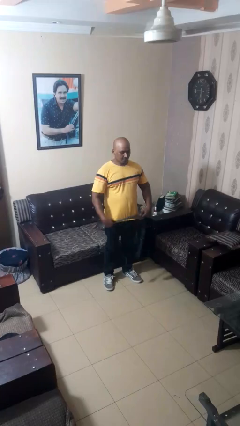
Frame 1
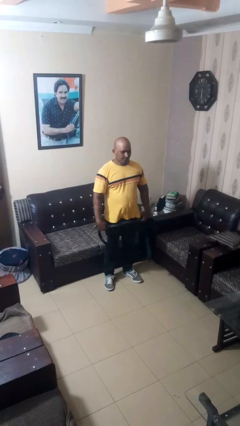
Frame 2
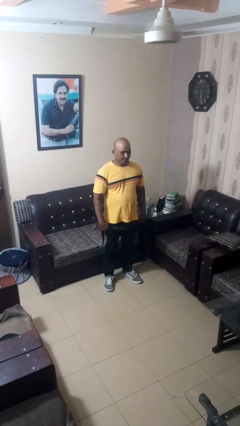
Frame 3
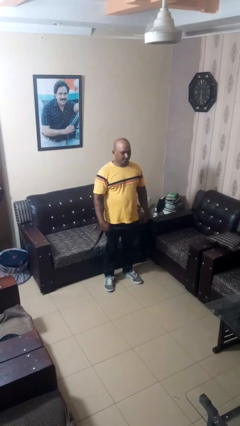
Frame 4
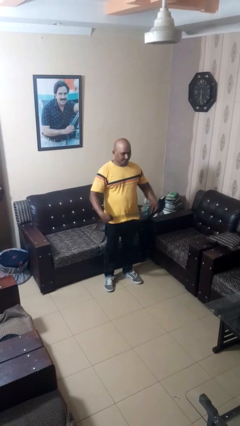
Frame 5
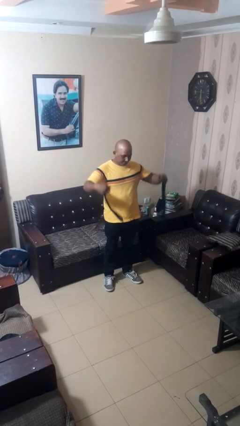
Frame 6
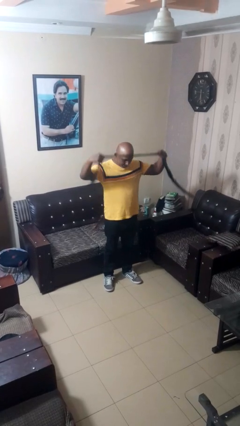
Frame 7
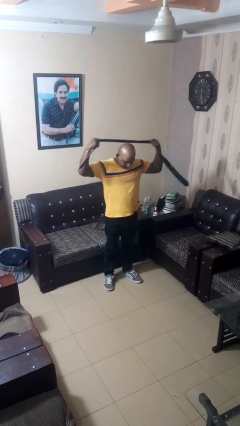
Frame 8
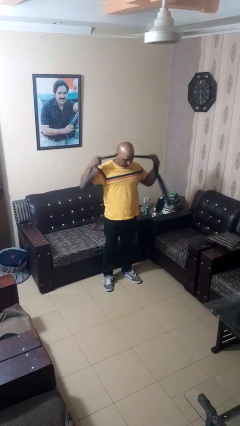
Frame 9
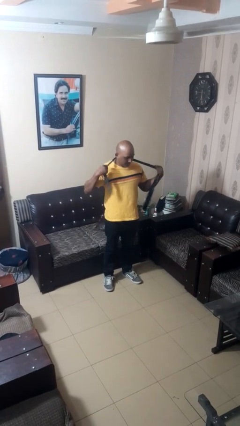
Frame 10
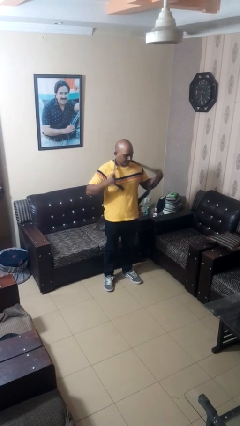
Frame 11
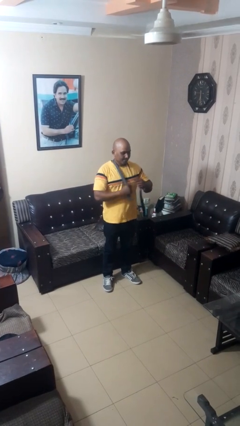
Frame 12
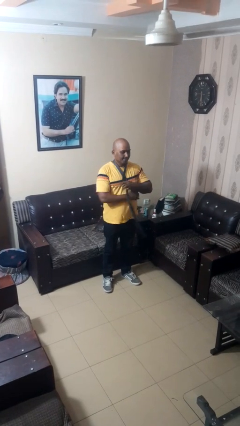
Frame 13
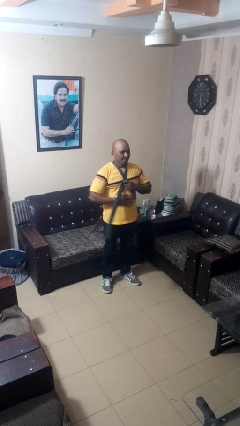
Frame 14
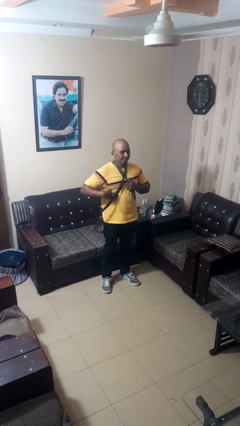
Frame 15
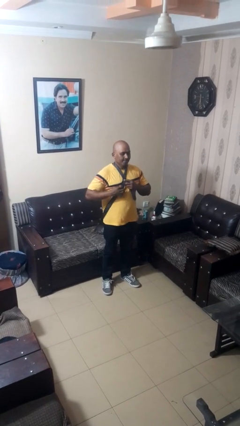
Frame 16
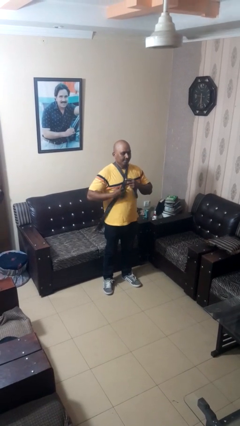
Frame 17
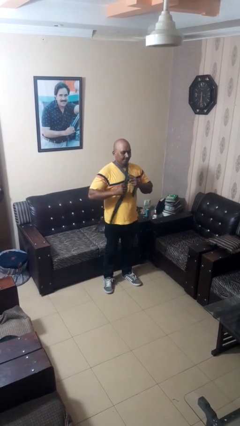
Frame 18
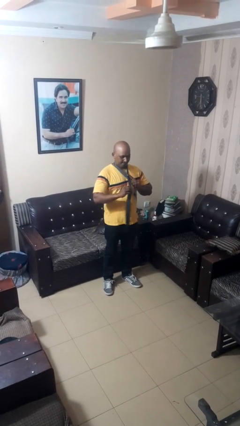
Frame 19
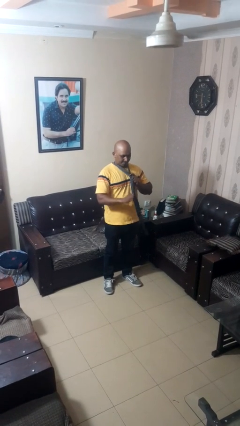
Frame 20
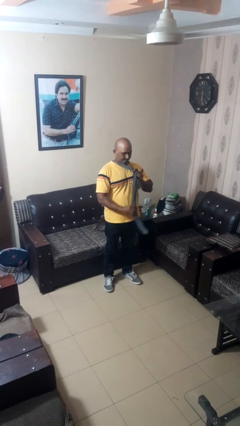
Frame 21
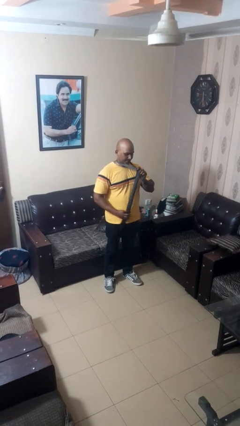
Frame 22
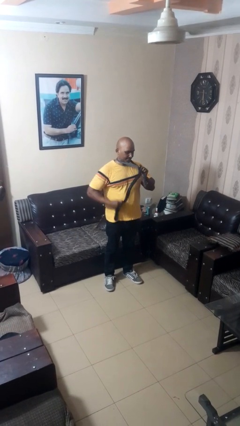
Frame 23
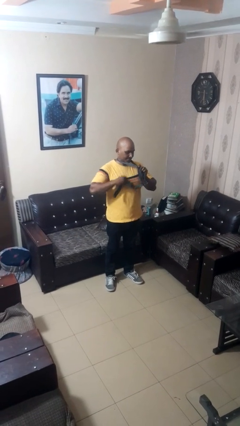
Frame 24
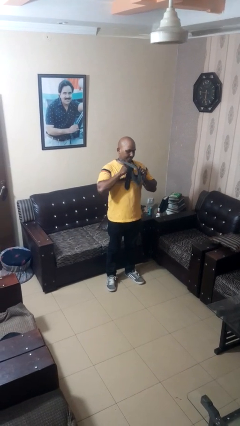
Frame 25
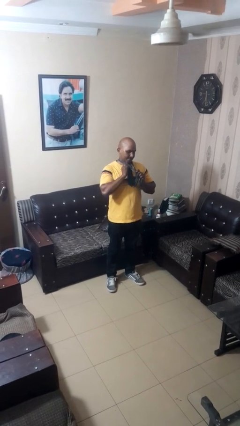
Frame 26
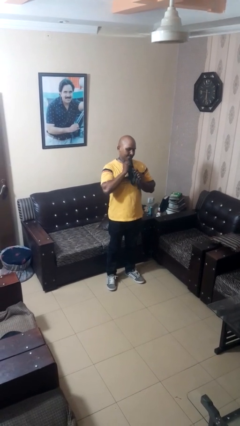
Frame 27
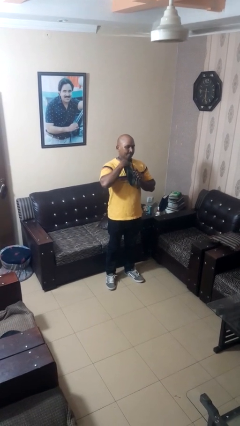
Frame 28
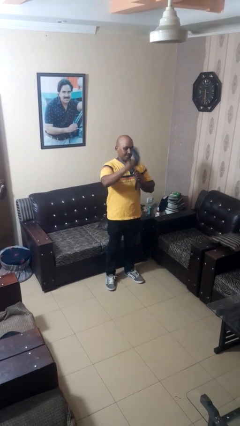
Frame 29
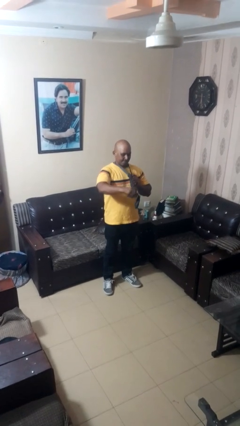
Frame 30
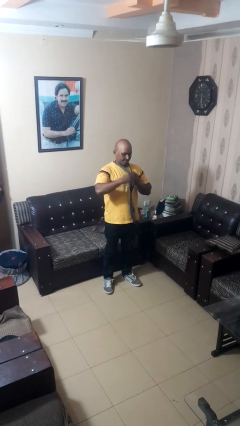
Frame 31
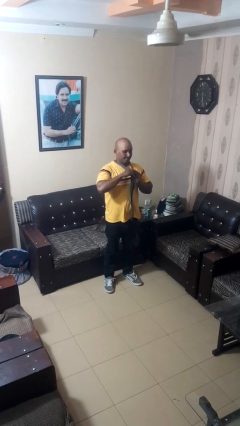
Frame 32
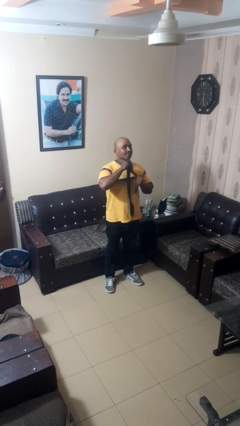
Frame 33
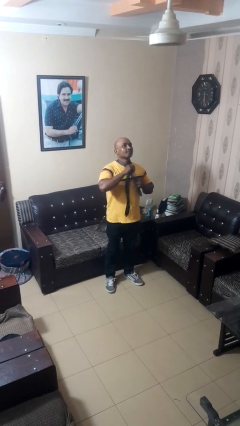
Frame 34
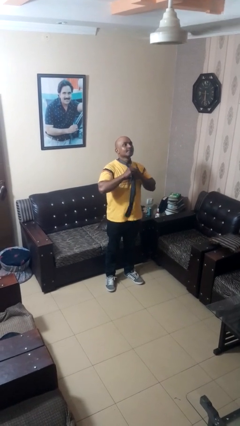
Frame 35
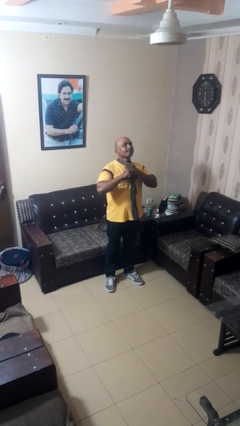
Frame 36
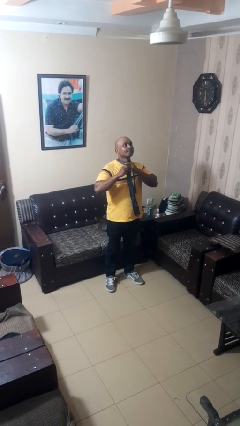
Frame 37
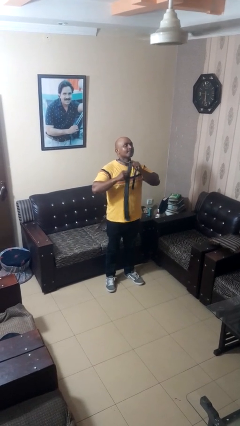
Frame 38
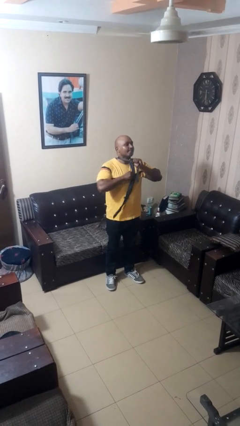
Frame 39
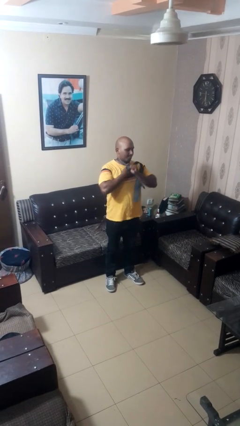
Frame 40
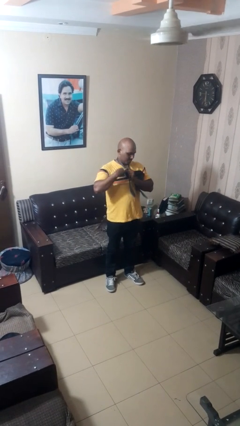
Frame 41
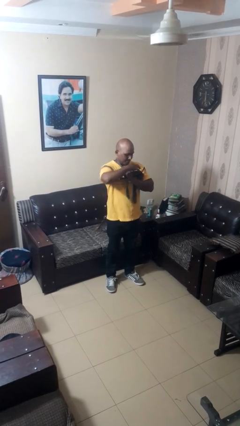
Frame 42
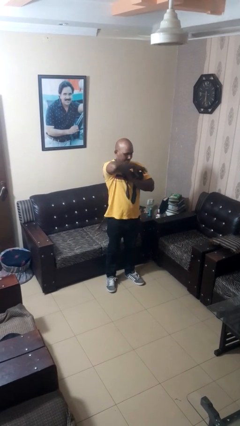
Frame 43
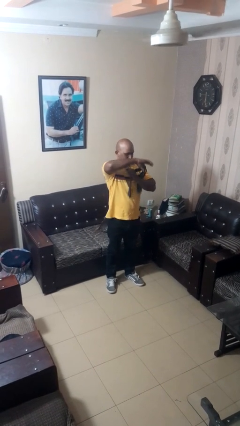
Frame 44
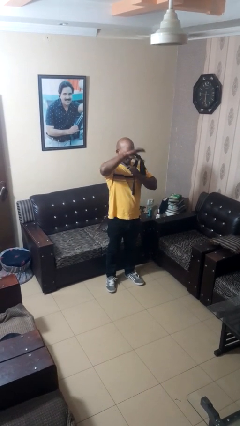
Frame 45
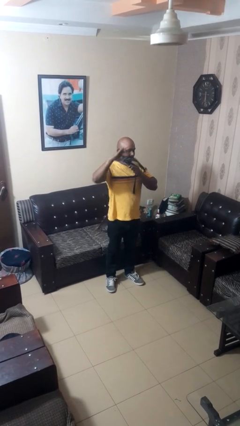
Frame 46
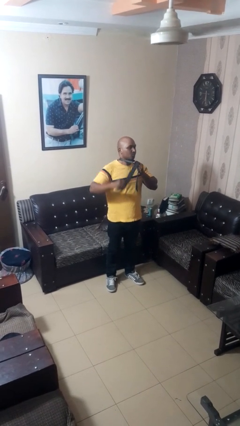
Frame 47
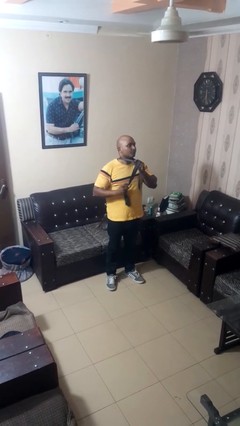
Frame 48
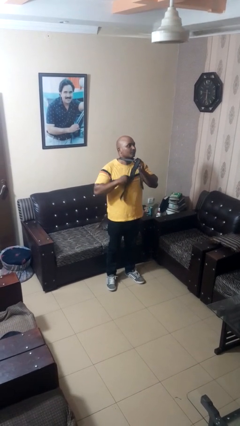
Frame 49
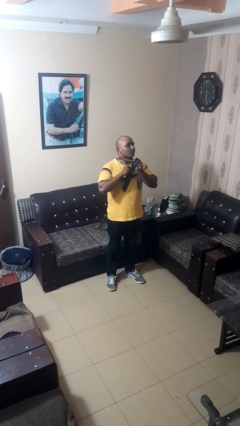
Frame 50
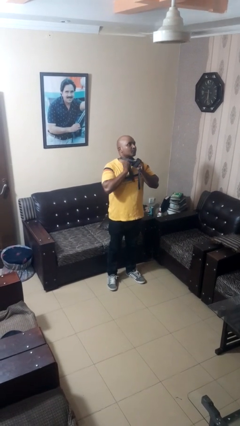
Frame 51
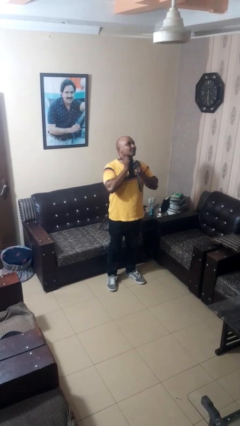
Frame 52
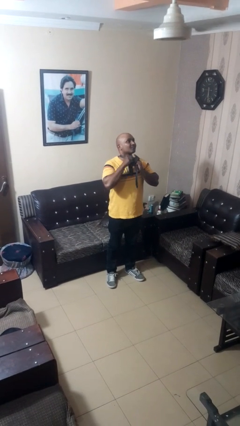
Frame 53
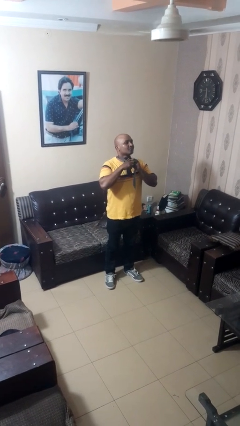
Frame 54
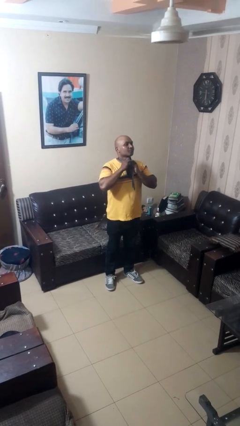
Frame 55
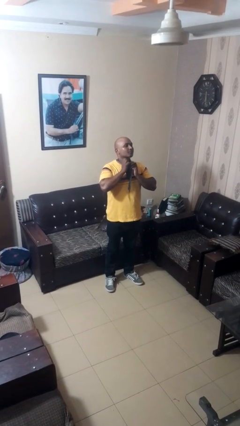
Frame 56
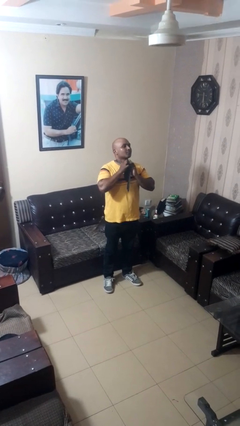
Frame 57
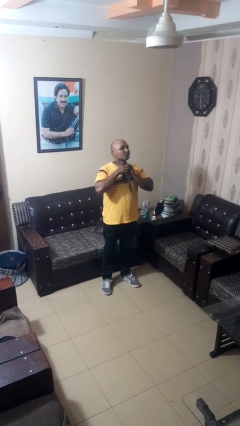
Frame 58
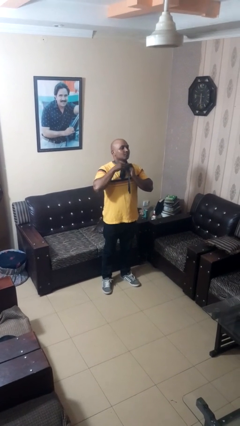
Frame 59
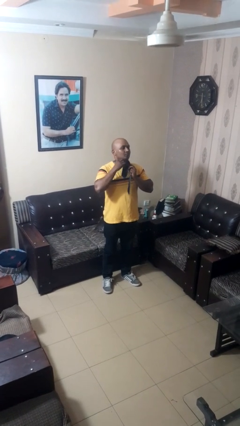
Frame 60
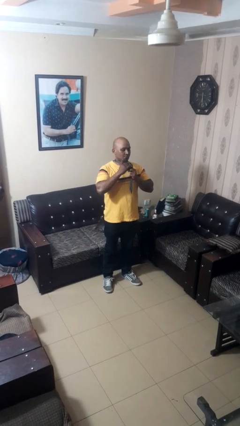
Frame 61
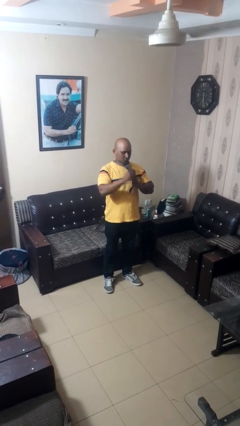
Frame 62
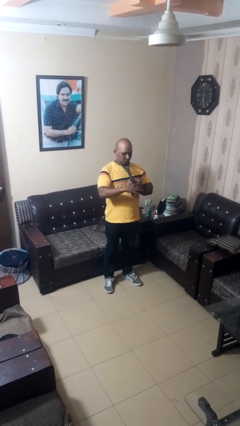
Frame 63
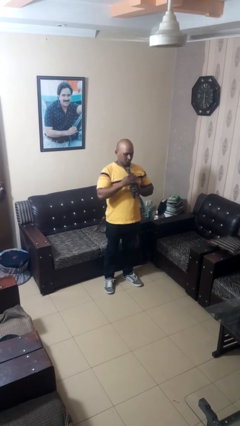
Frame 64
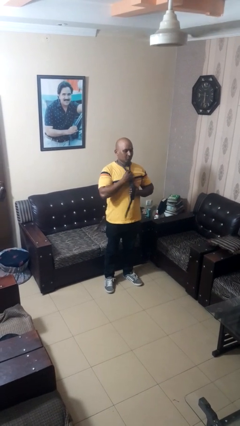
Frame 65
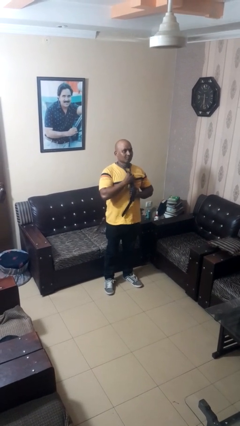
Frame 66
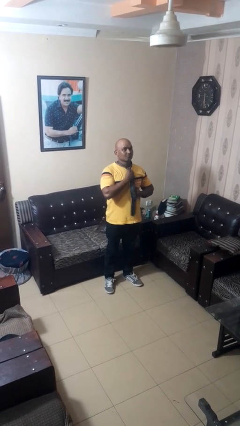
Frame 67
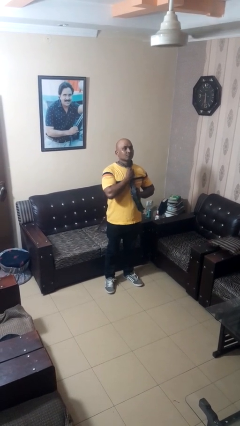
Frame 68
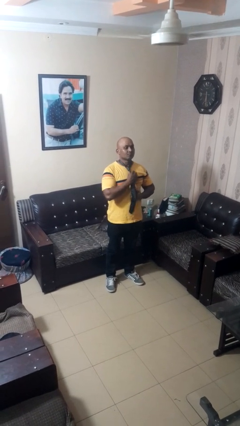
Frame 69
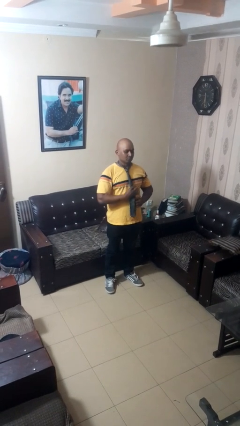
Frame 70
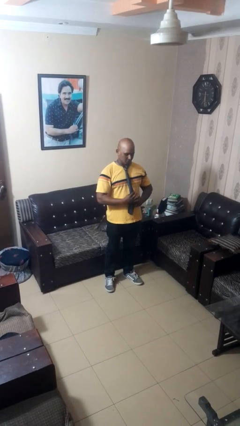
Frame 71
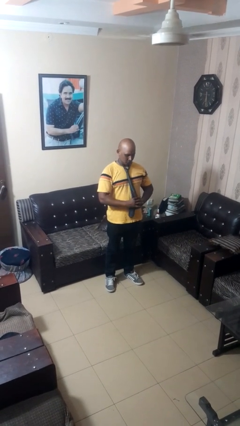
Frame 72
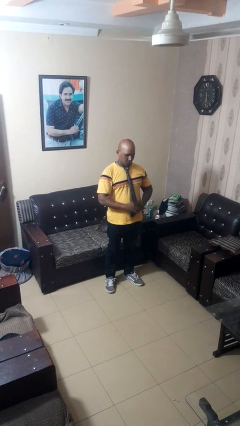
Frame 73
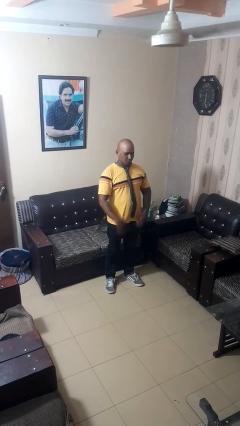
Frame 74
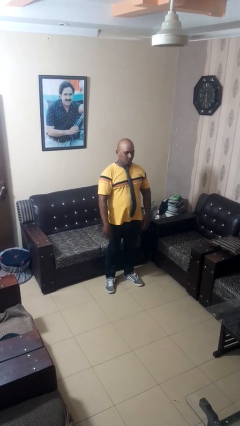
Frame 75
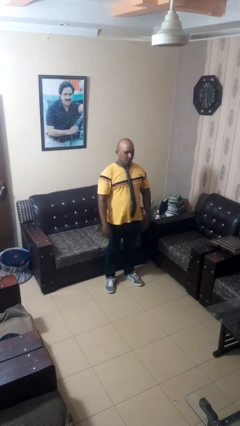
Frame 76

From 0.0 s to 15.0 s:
person puts on necktie

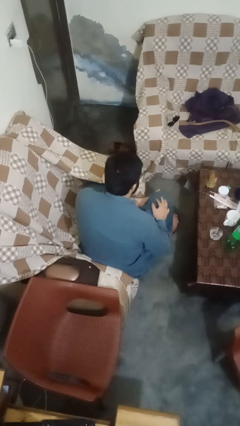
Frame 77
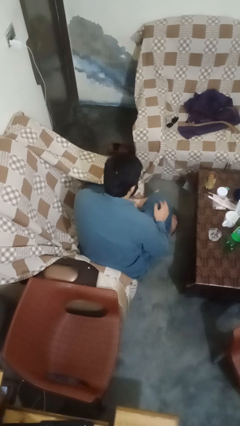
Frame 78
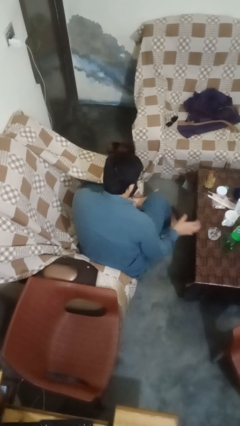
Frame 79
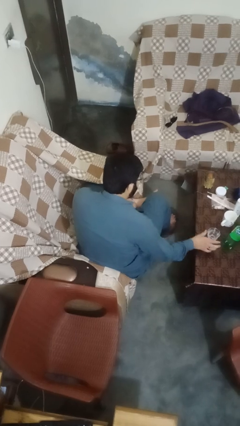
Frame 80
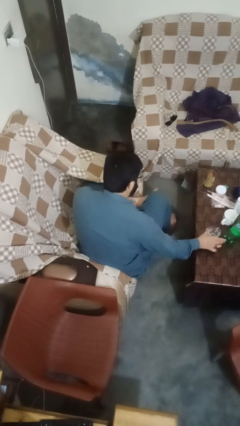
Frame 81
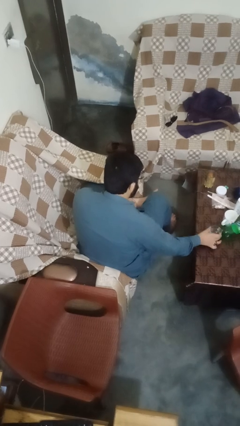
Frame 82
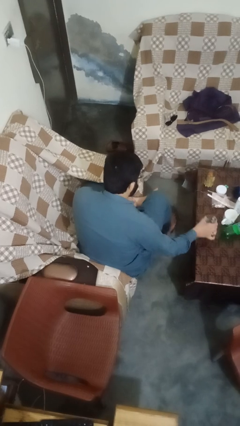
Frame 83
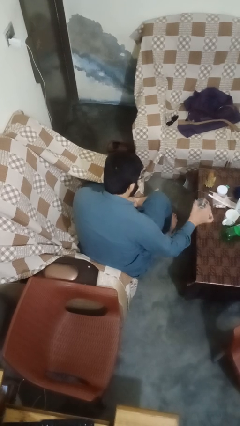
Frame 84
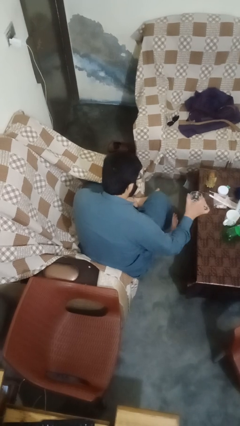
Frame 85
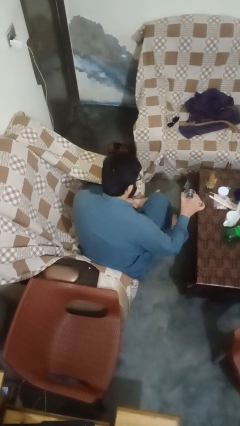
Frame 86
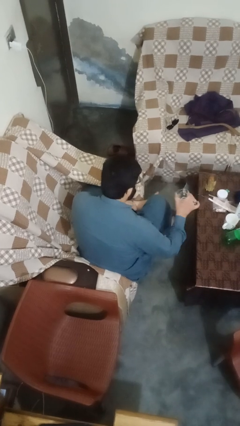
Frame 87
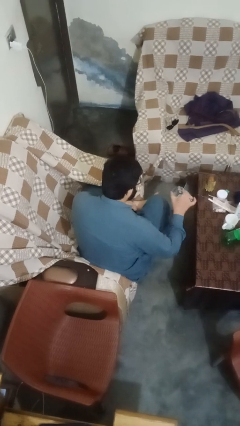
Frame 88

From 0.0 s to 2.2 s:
person picks up object from table

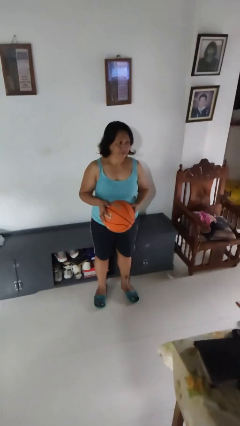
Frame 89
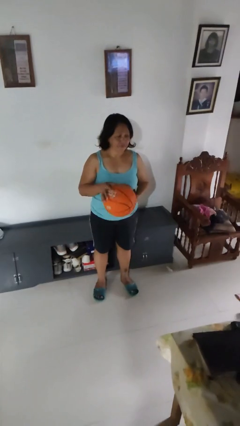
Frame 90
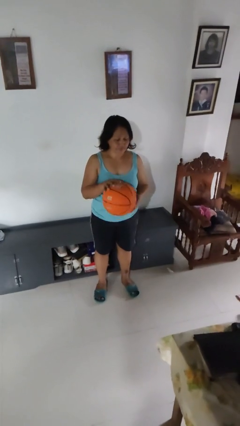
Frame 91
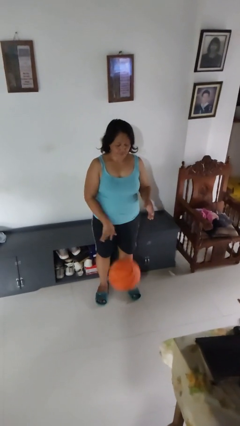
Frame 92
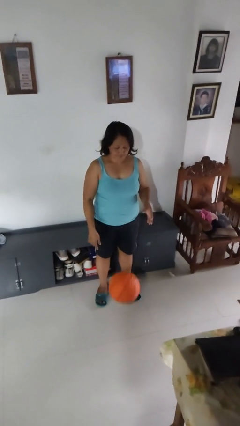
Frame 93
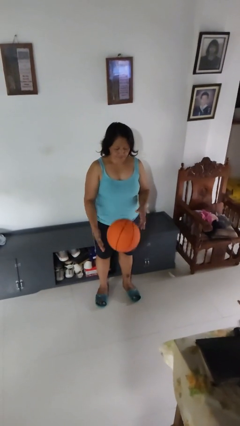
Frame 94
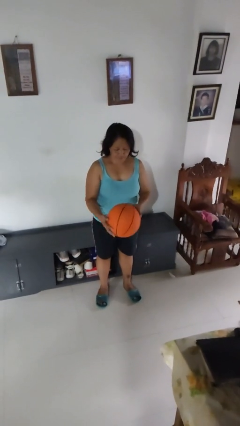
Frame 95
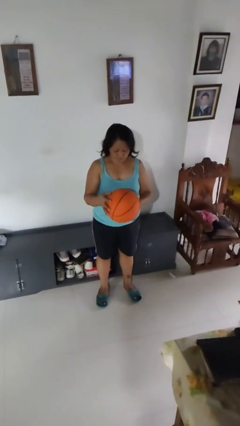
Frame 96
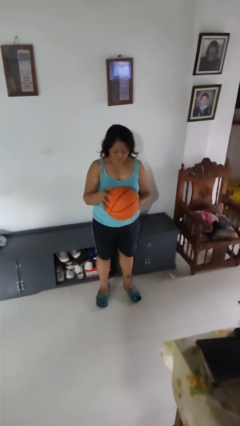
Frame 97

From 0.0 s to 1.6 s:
person bounces ball on floor
